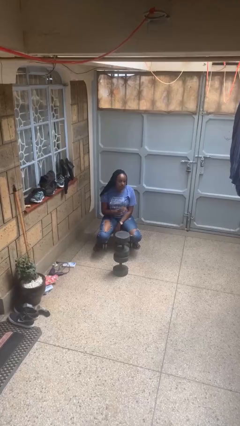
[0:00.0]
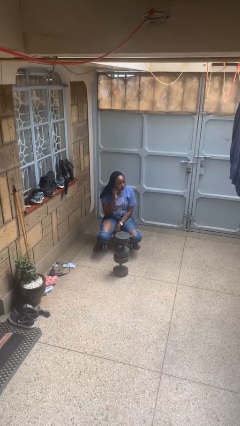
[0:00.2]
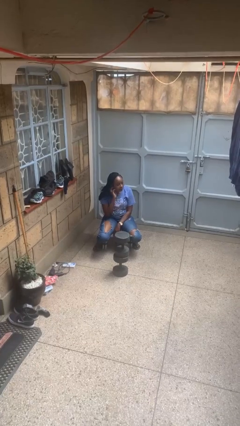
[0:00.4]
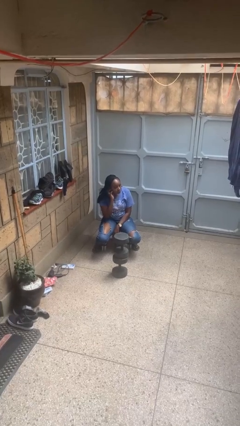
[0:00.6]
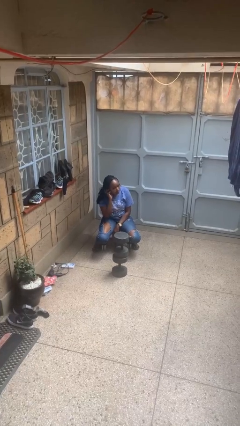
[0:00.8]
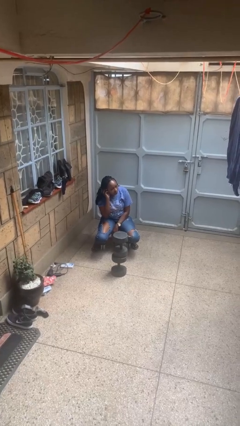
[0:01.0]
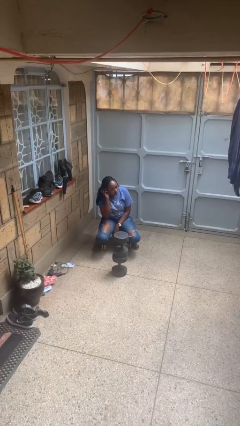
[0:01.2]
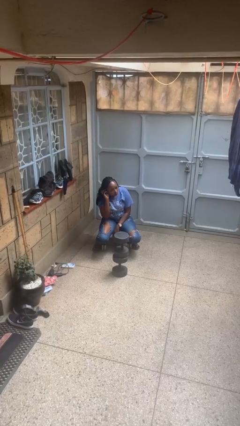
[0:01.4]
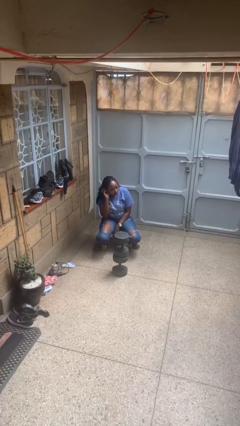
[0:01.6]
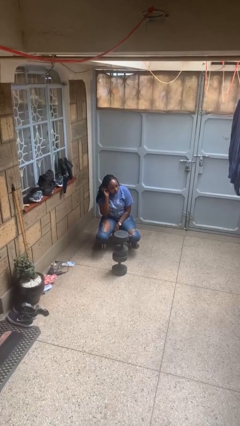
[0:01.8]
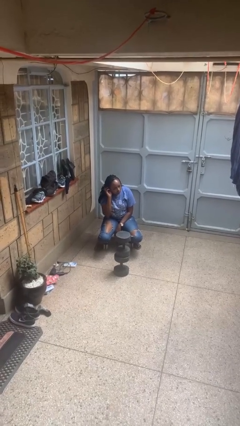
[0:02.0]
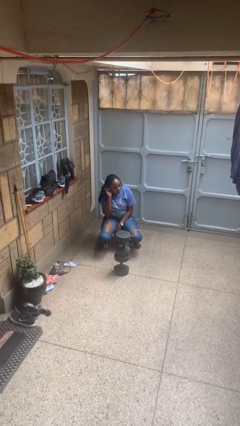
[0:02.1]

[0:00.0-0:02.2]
person gestures listen closely

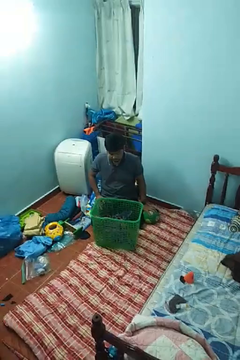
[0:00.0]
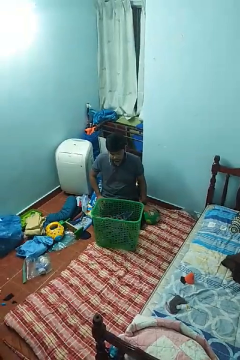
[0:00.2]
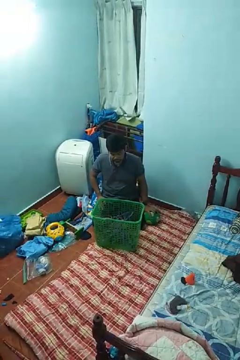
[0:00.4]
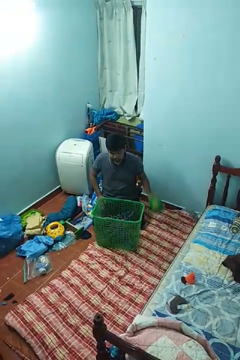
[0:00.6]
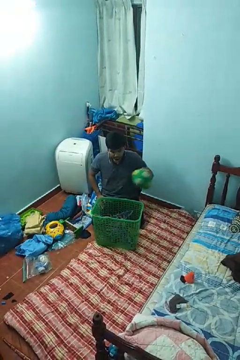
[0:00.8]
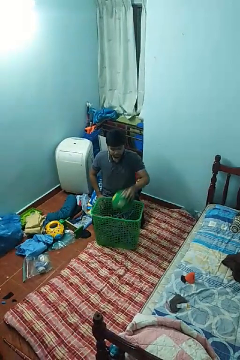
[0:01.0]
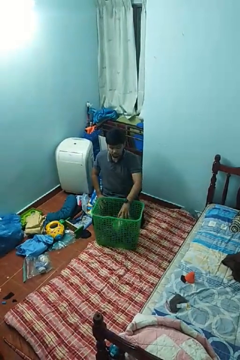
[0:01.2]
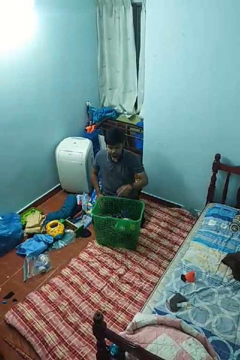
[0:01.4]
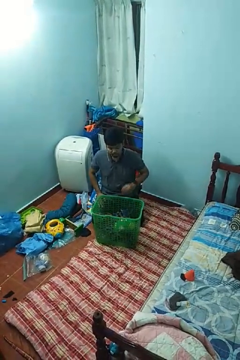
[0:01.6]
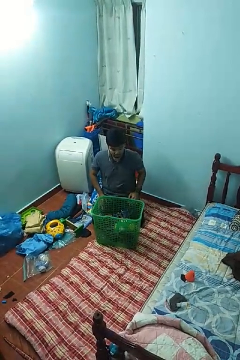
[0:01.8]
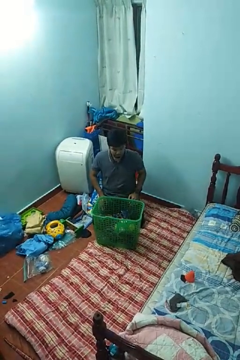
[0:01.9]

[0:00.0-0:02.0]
person puts object into basket

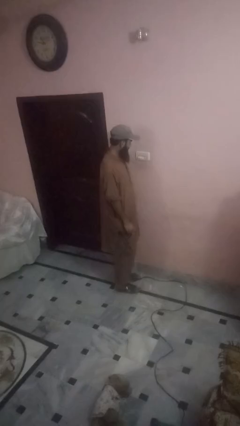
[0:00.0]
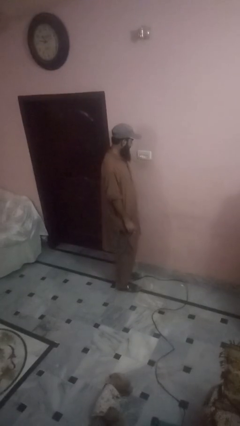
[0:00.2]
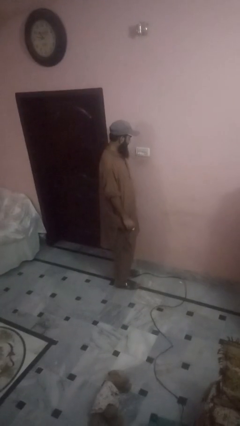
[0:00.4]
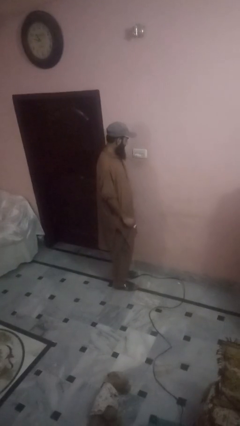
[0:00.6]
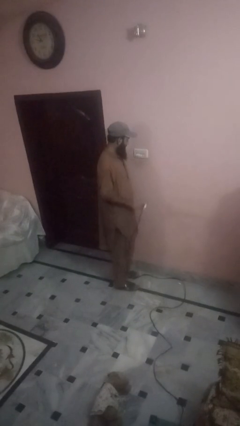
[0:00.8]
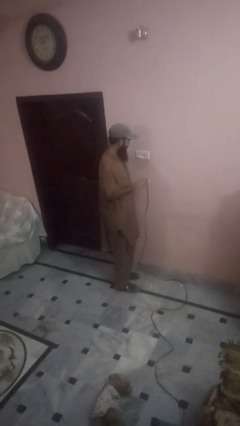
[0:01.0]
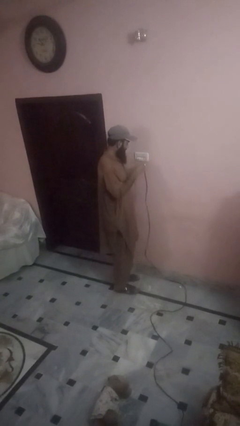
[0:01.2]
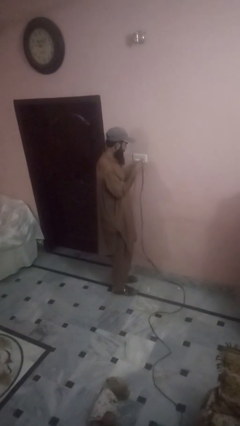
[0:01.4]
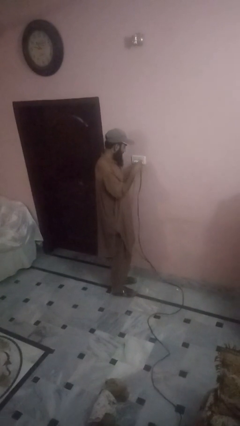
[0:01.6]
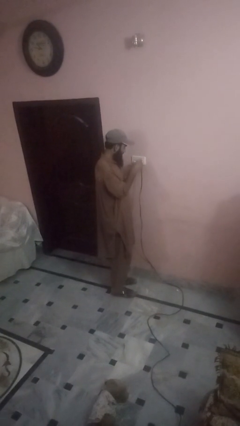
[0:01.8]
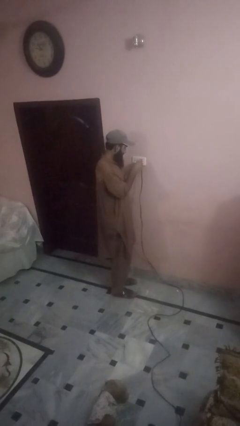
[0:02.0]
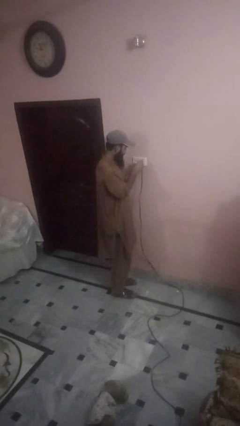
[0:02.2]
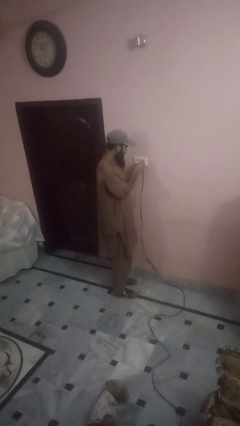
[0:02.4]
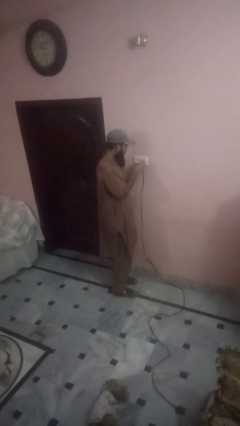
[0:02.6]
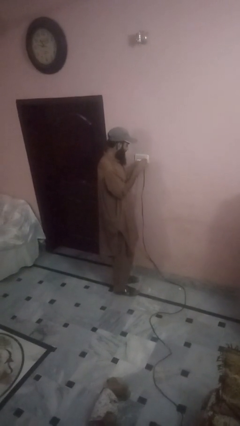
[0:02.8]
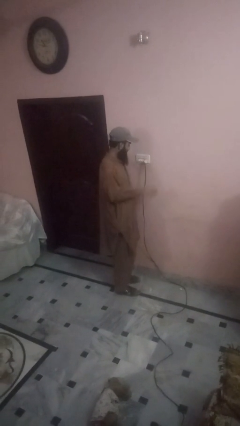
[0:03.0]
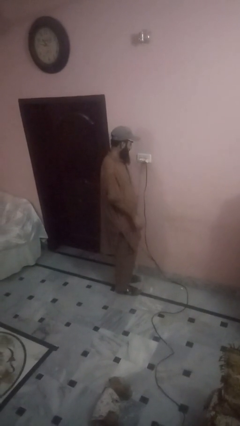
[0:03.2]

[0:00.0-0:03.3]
person plugs into electrical socket

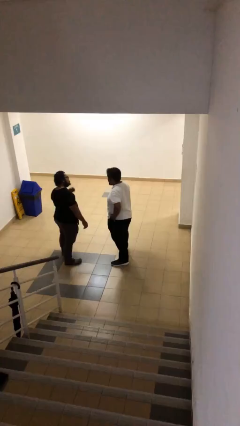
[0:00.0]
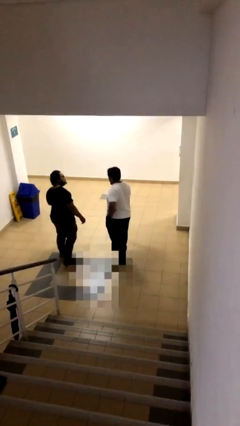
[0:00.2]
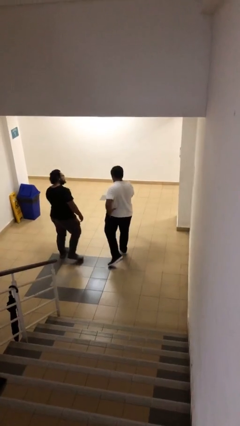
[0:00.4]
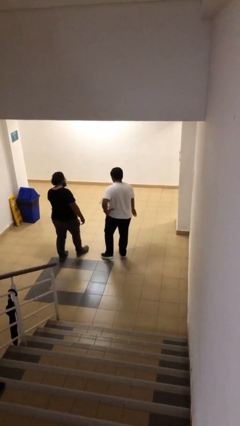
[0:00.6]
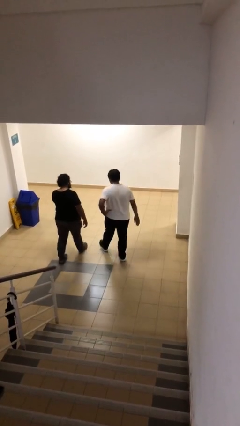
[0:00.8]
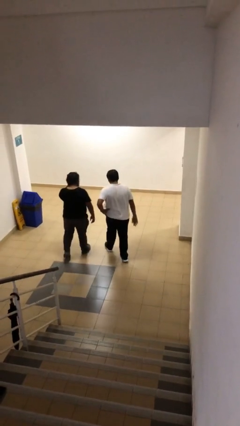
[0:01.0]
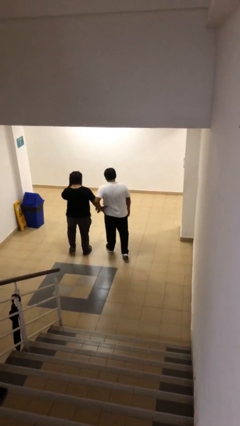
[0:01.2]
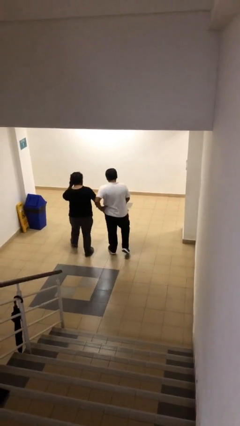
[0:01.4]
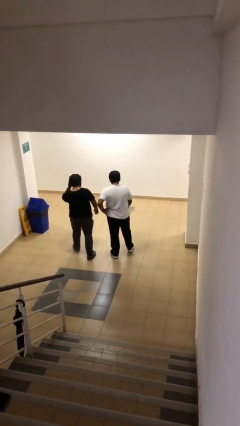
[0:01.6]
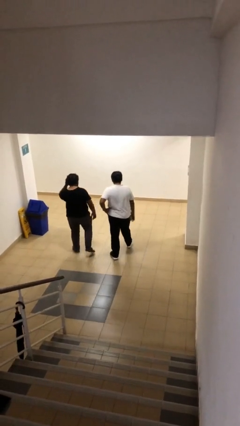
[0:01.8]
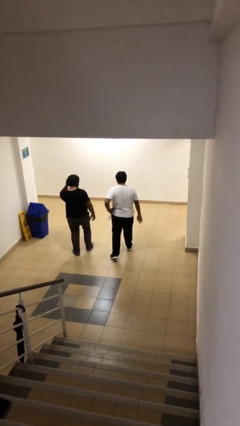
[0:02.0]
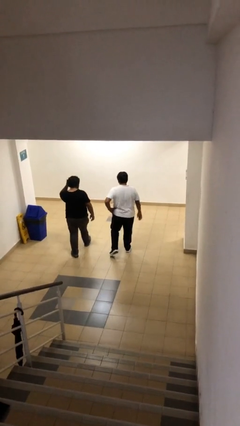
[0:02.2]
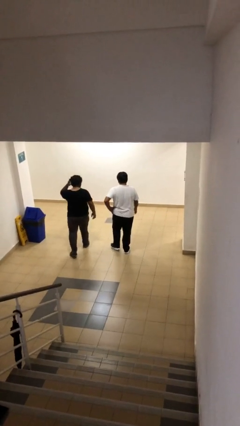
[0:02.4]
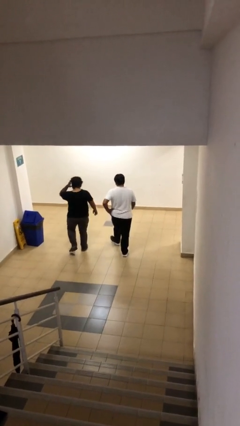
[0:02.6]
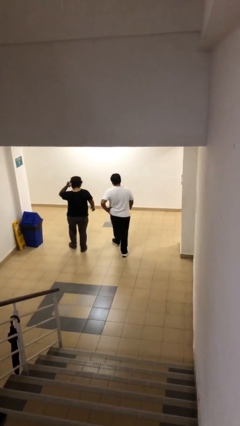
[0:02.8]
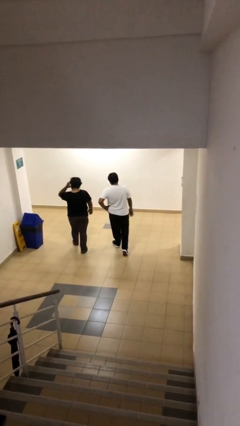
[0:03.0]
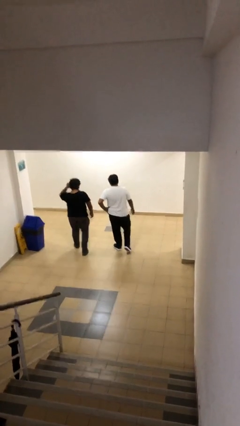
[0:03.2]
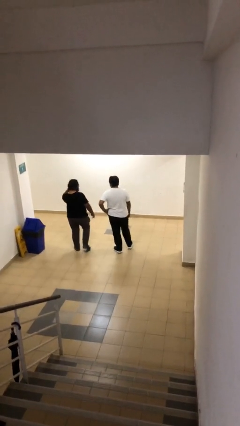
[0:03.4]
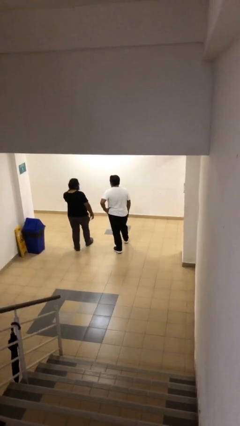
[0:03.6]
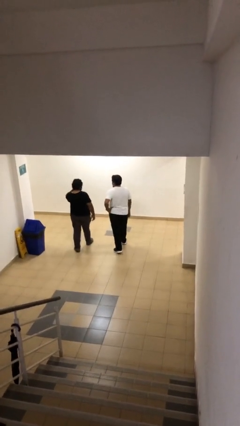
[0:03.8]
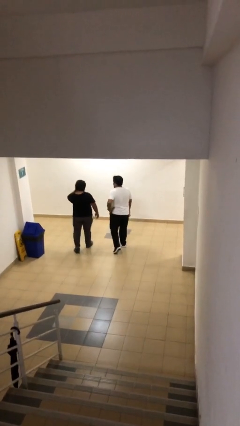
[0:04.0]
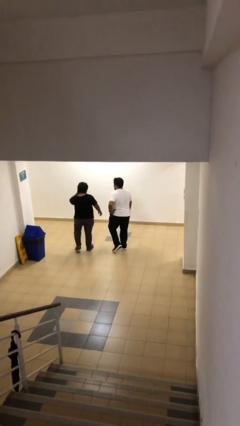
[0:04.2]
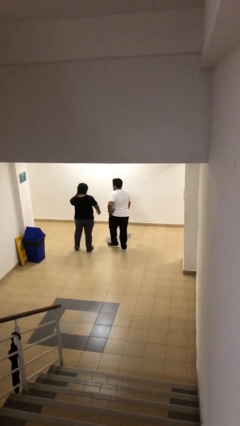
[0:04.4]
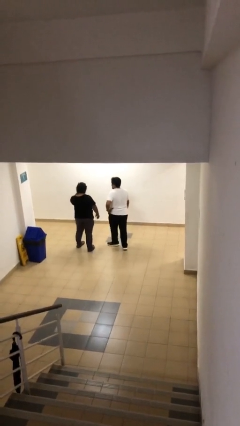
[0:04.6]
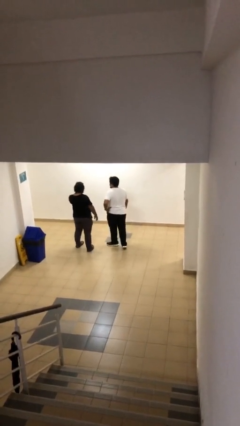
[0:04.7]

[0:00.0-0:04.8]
person talks to person

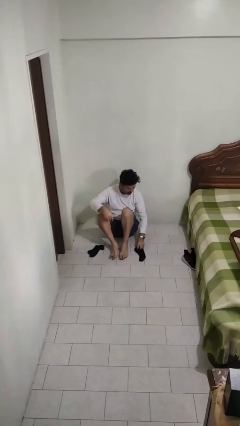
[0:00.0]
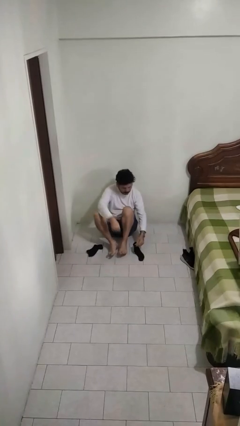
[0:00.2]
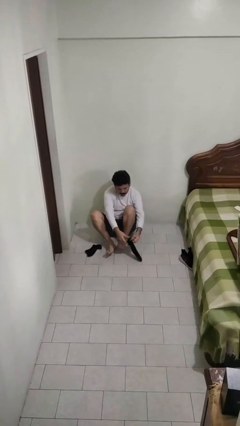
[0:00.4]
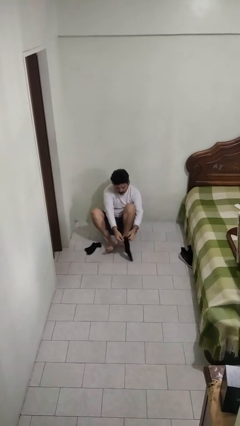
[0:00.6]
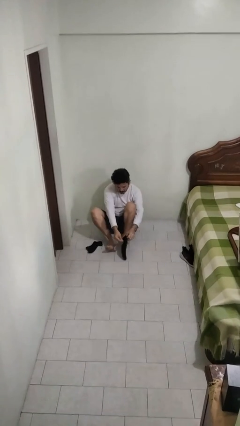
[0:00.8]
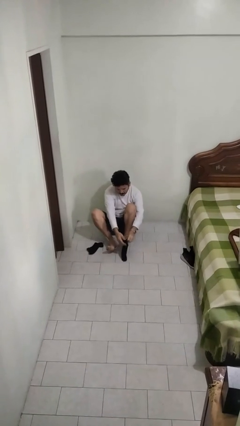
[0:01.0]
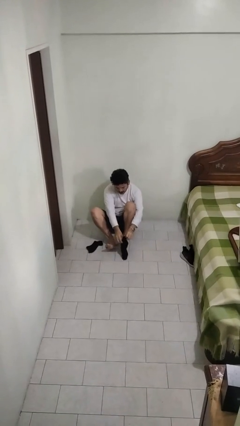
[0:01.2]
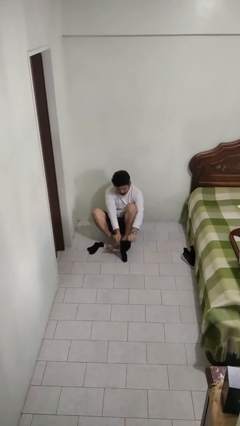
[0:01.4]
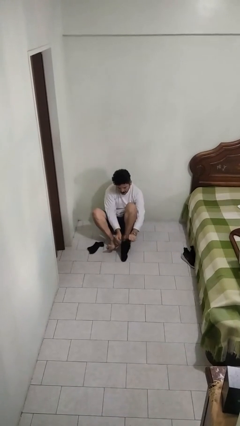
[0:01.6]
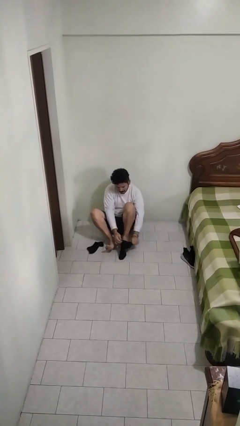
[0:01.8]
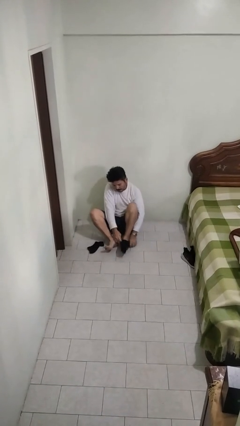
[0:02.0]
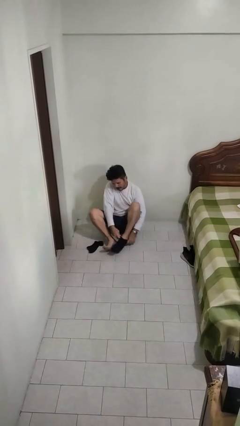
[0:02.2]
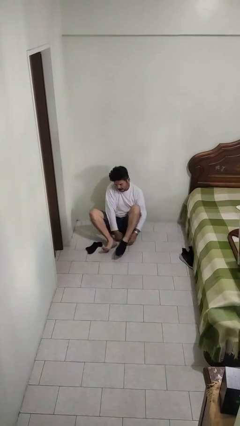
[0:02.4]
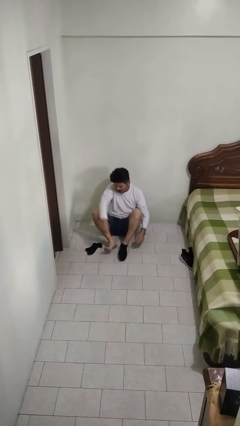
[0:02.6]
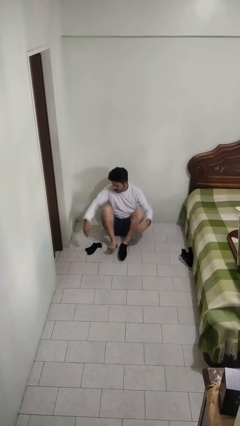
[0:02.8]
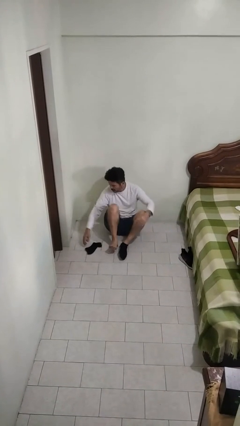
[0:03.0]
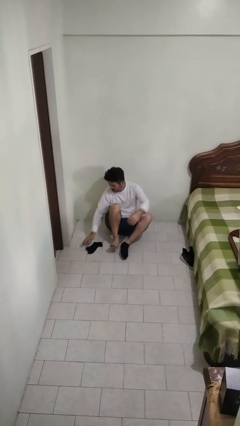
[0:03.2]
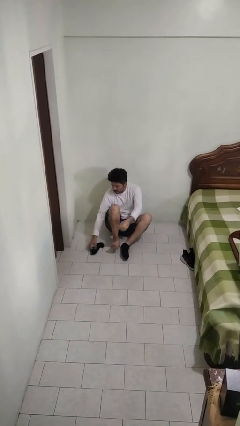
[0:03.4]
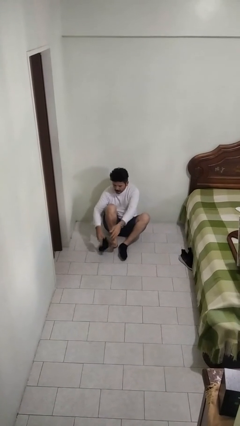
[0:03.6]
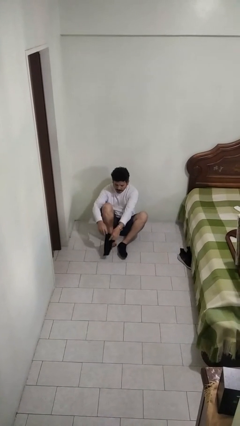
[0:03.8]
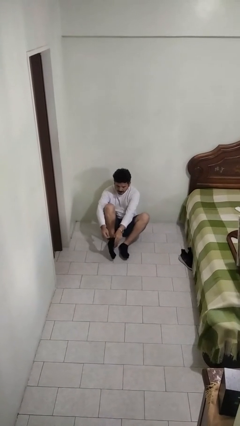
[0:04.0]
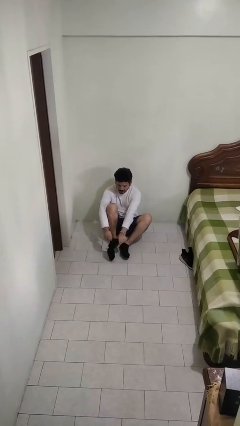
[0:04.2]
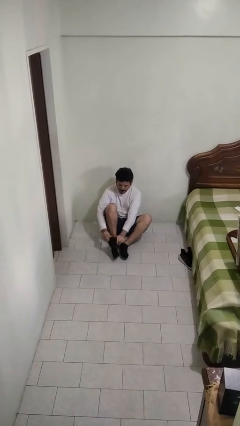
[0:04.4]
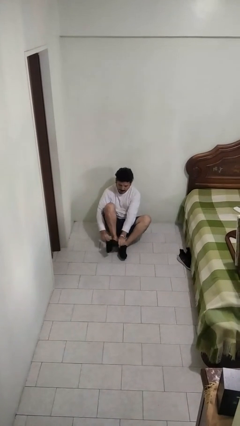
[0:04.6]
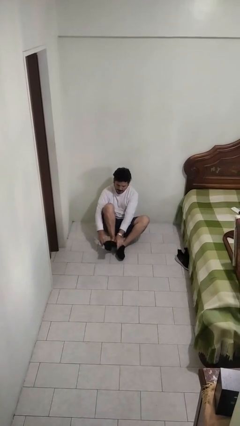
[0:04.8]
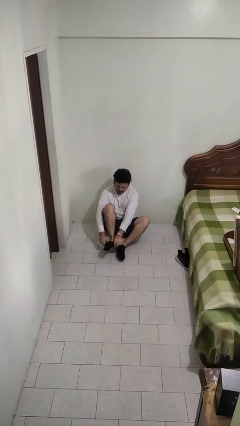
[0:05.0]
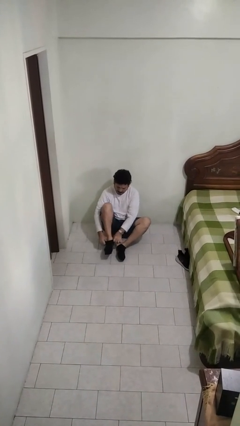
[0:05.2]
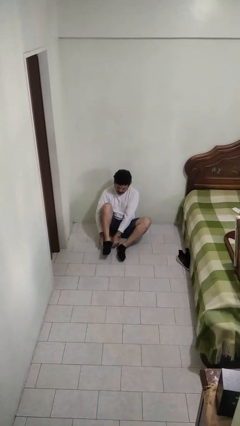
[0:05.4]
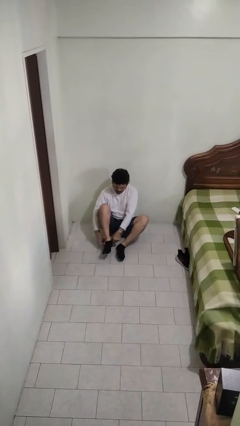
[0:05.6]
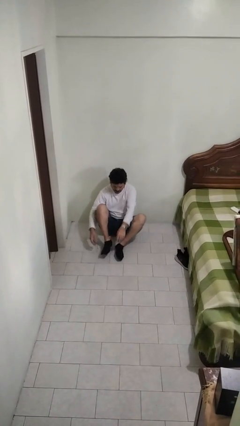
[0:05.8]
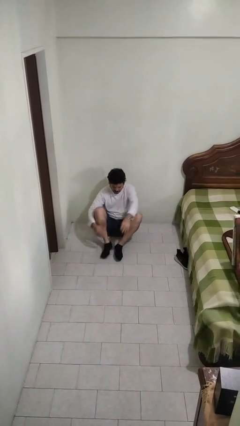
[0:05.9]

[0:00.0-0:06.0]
person puts on socks
